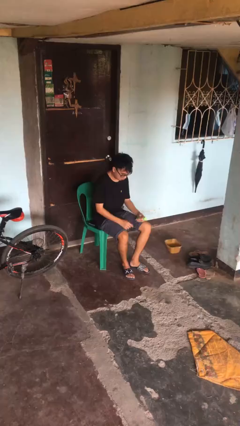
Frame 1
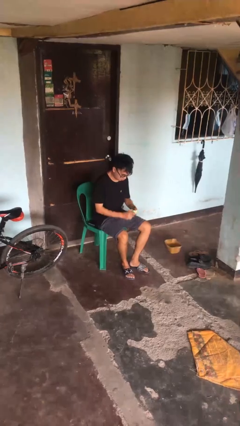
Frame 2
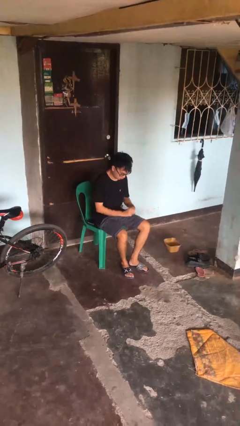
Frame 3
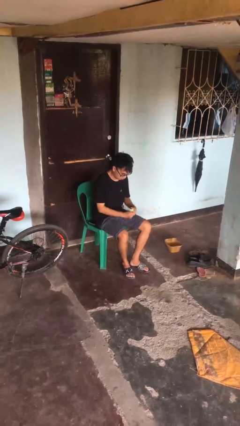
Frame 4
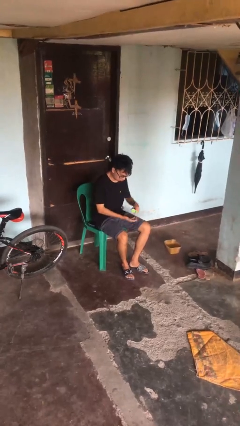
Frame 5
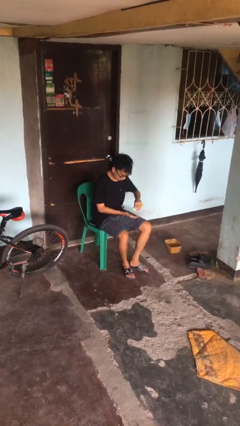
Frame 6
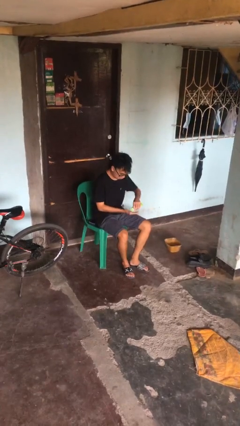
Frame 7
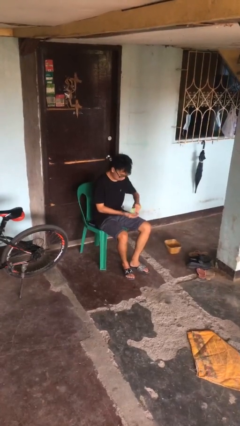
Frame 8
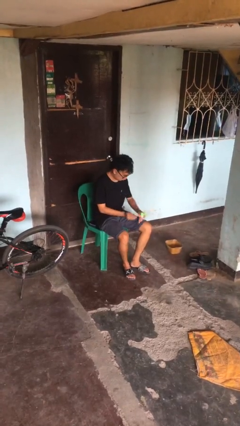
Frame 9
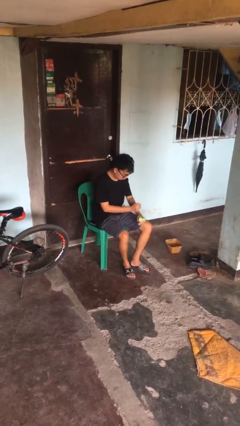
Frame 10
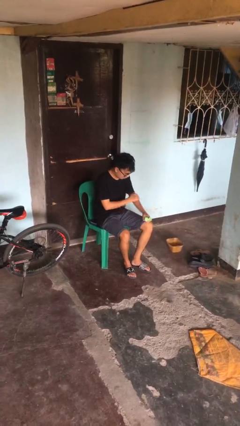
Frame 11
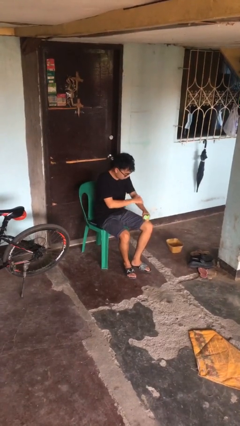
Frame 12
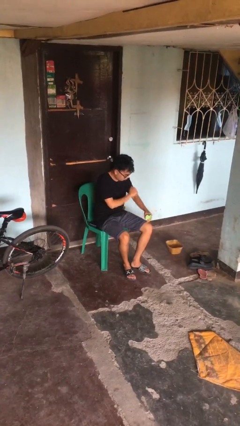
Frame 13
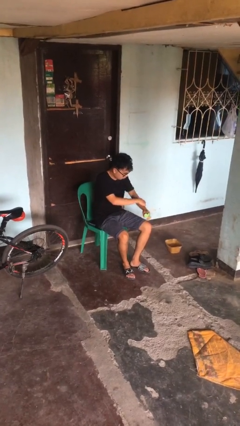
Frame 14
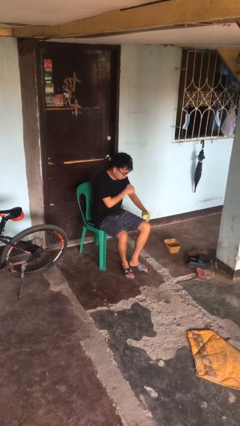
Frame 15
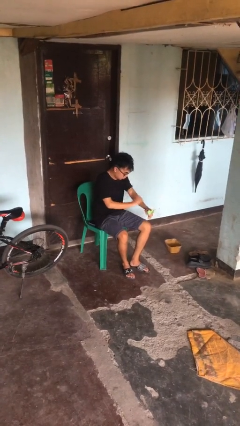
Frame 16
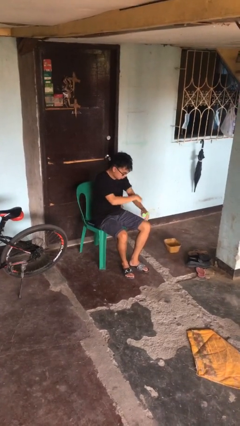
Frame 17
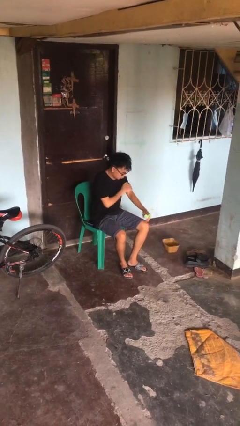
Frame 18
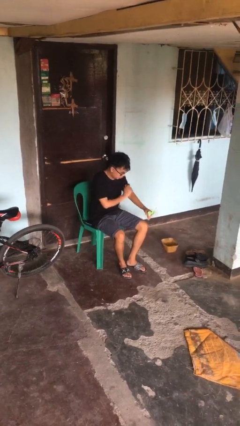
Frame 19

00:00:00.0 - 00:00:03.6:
person applies sunscreen

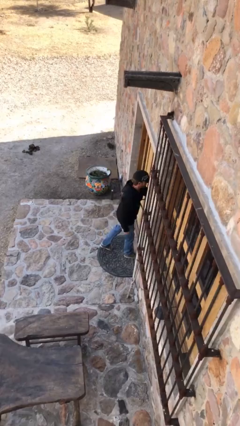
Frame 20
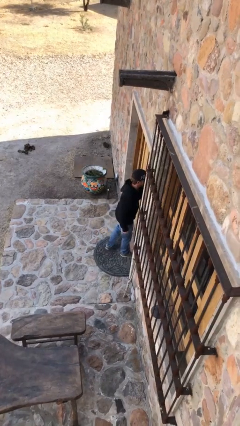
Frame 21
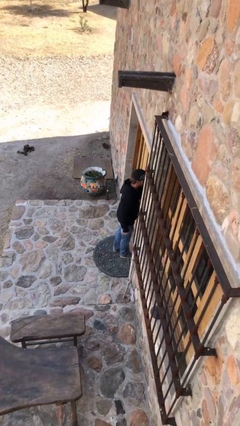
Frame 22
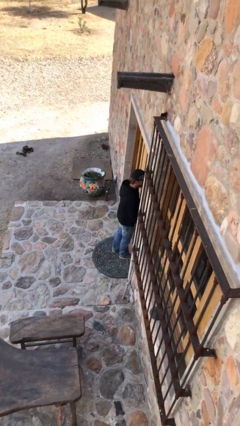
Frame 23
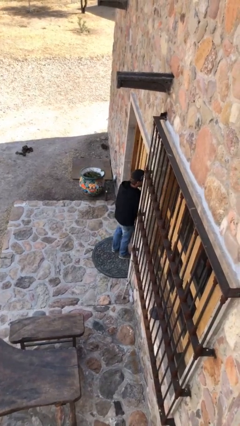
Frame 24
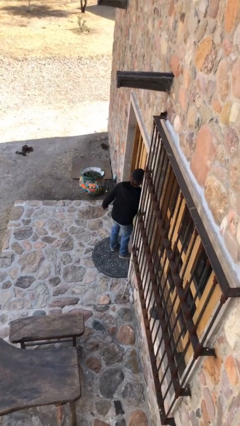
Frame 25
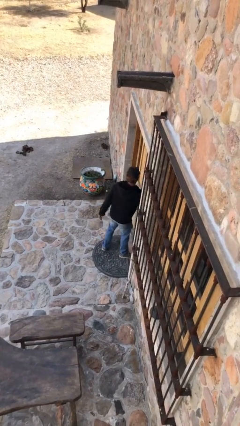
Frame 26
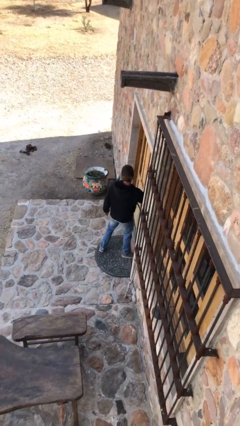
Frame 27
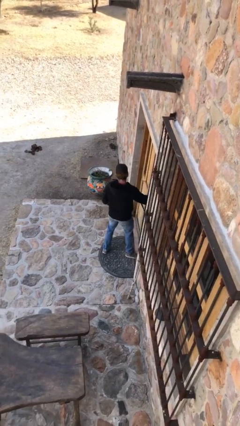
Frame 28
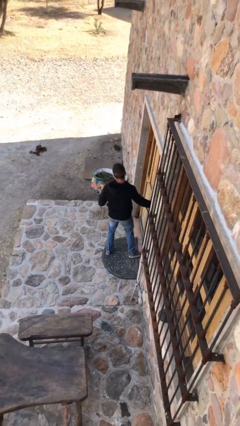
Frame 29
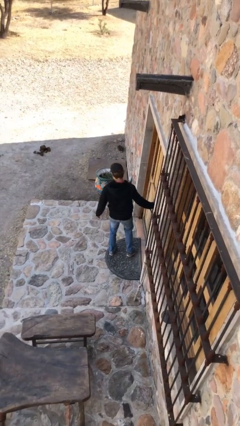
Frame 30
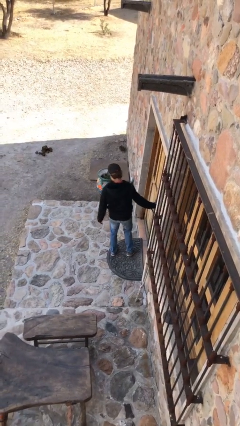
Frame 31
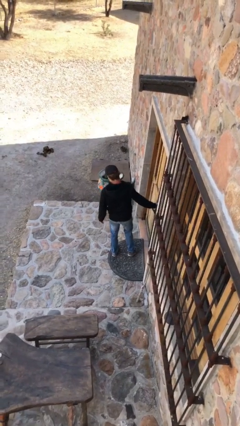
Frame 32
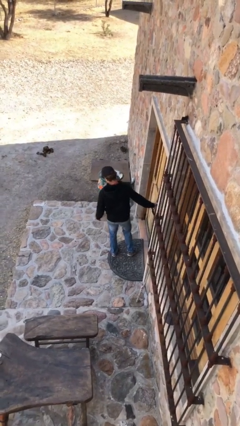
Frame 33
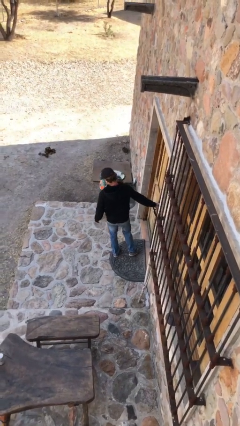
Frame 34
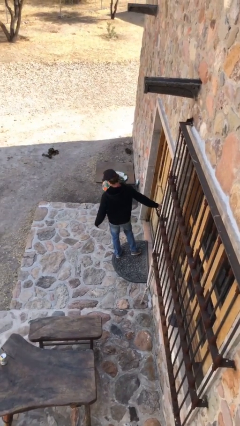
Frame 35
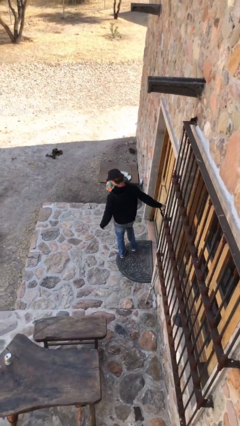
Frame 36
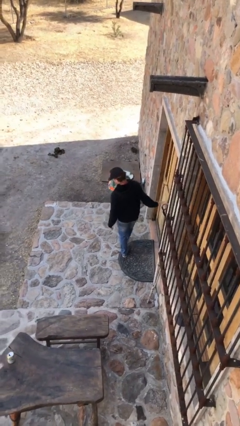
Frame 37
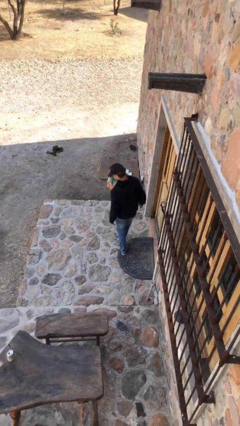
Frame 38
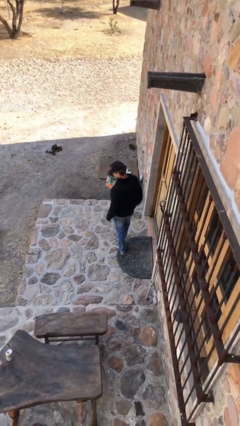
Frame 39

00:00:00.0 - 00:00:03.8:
person closes facility door

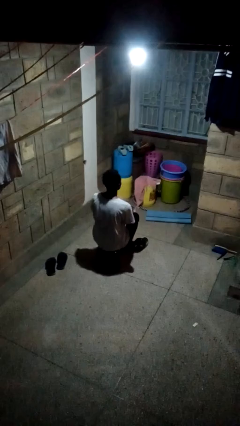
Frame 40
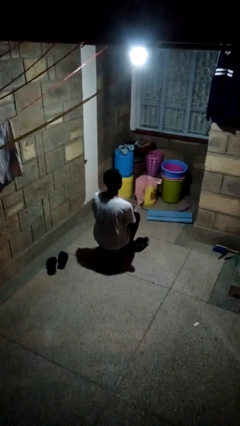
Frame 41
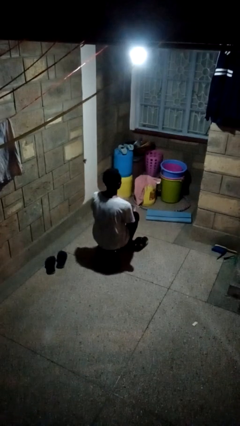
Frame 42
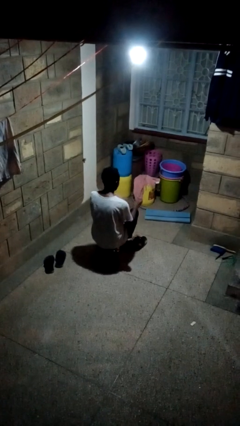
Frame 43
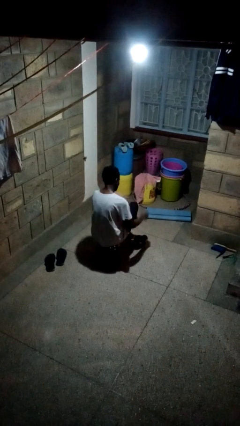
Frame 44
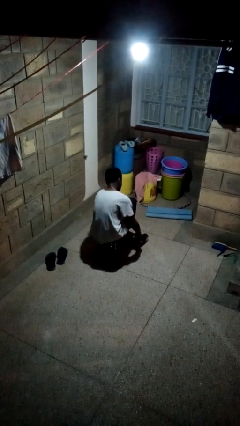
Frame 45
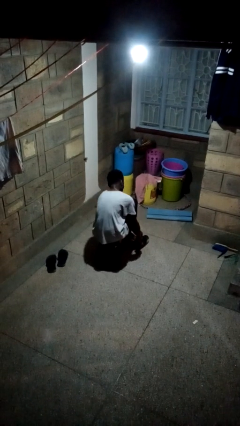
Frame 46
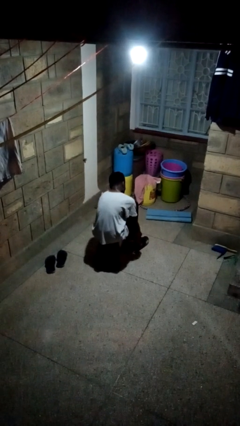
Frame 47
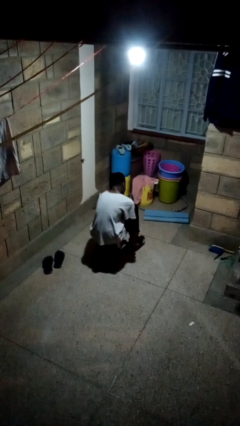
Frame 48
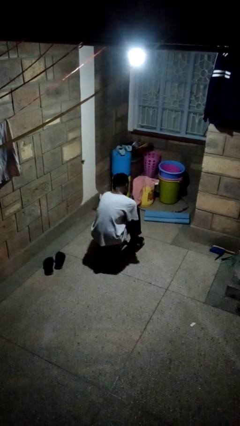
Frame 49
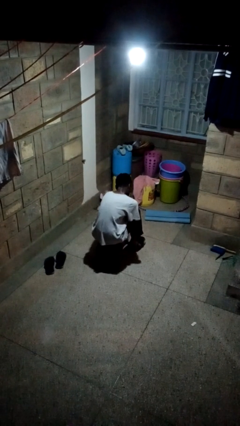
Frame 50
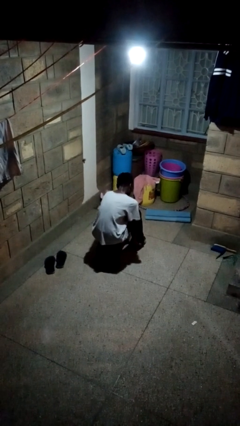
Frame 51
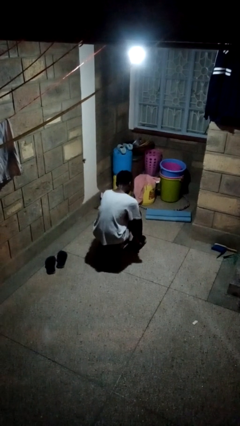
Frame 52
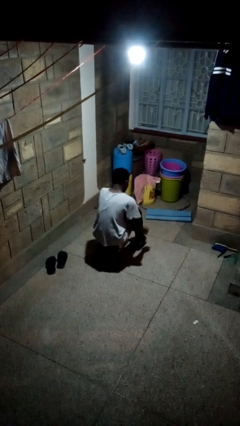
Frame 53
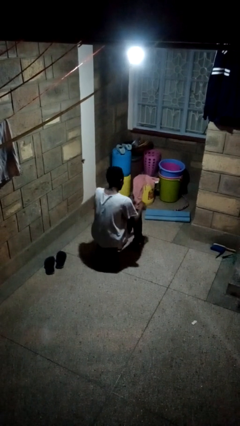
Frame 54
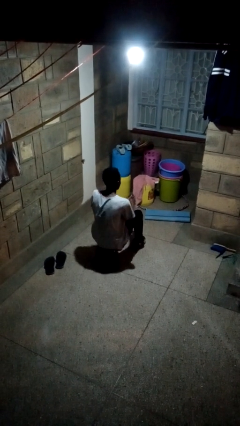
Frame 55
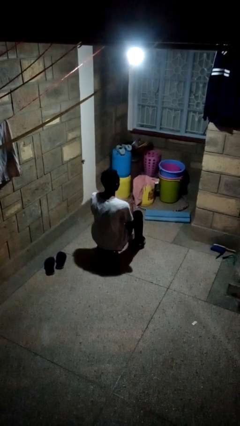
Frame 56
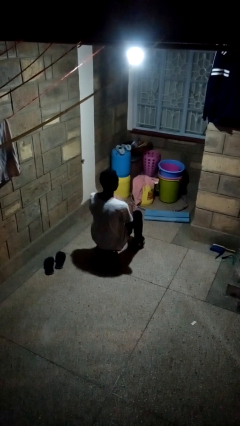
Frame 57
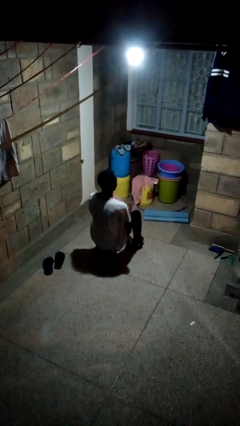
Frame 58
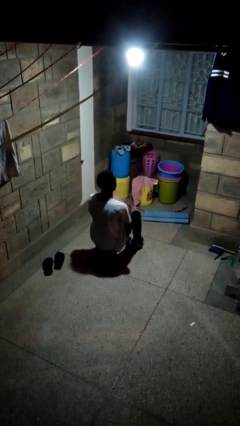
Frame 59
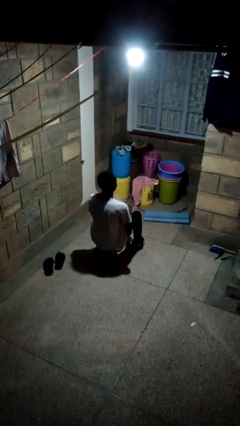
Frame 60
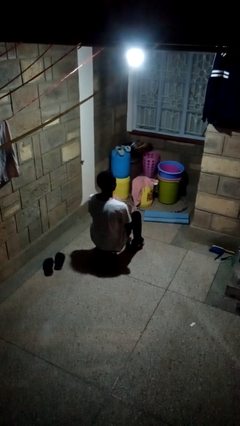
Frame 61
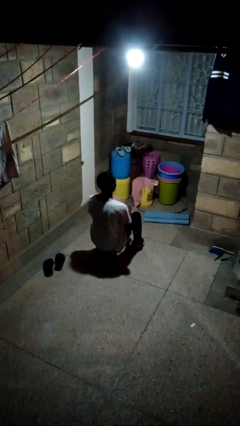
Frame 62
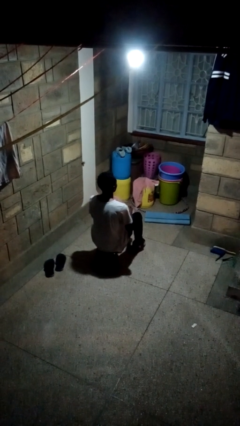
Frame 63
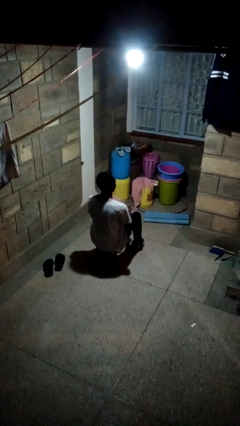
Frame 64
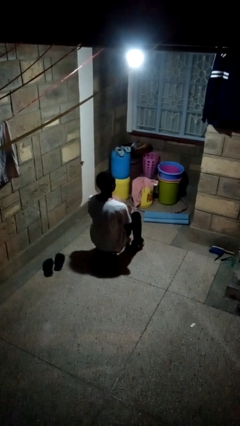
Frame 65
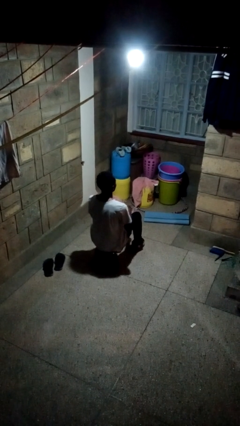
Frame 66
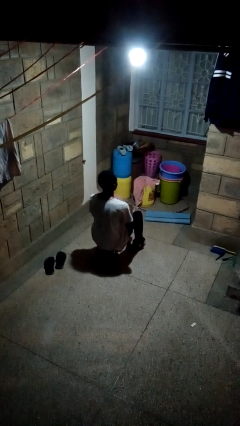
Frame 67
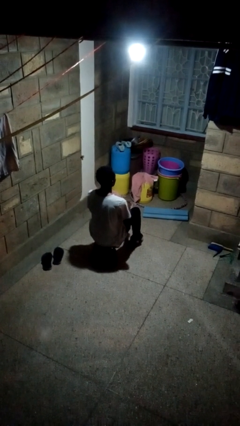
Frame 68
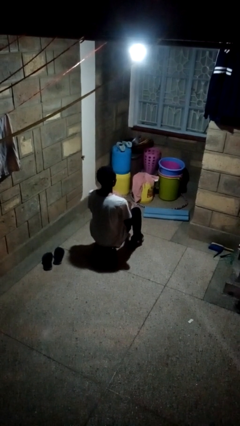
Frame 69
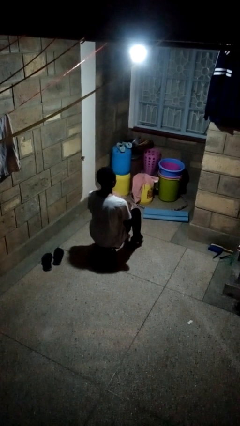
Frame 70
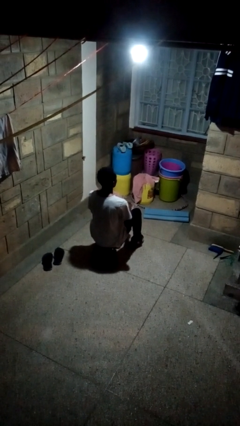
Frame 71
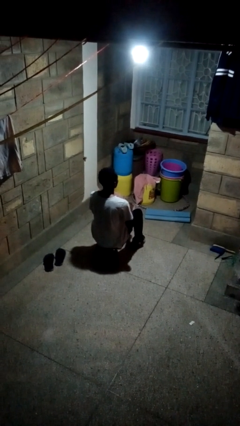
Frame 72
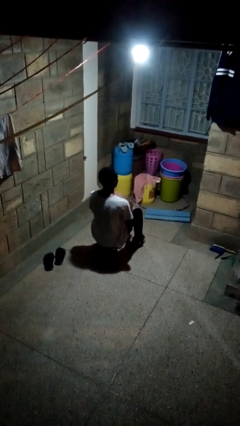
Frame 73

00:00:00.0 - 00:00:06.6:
person puts on shoes

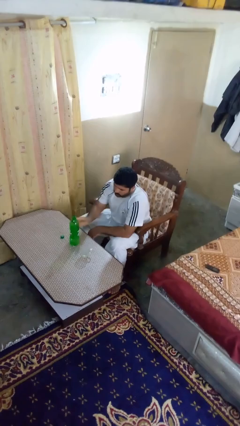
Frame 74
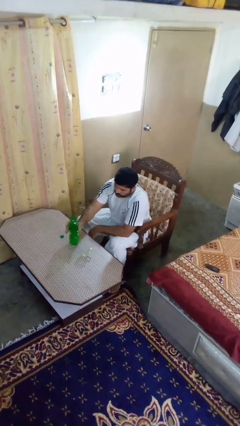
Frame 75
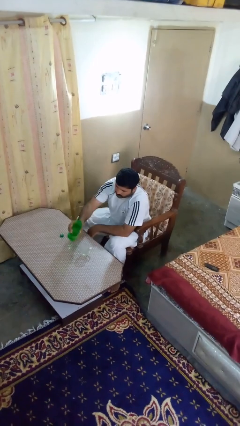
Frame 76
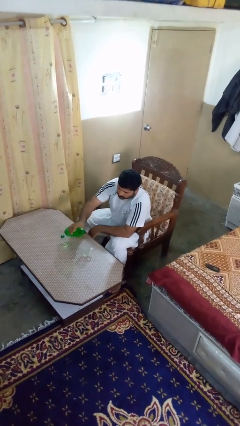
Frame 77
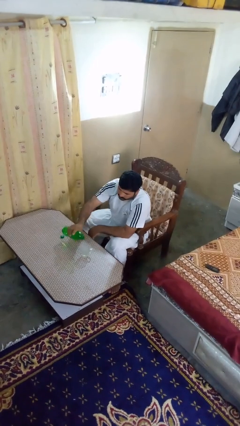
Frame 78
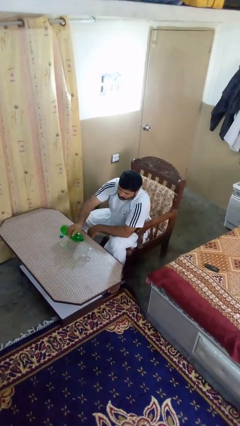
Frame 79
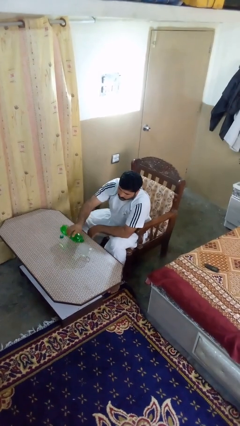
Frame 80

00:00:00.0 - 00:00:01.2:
person pours liquid into cup

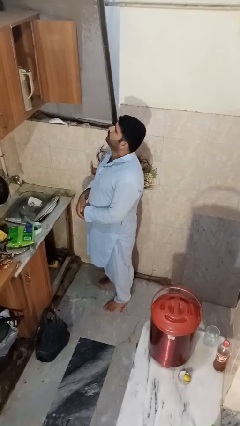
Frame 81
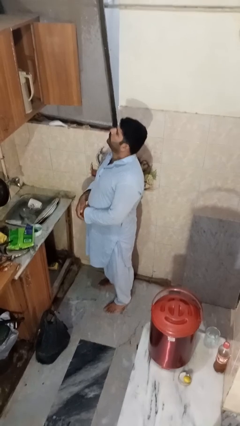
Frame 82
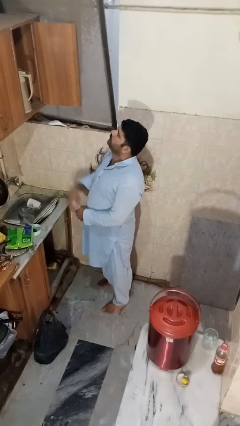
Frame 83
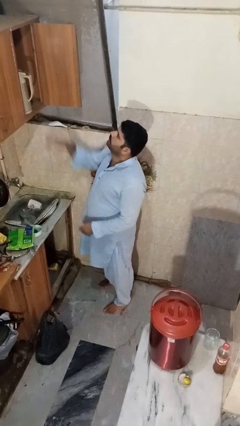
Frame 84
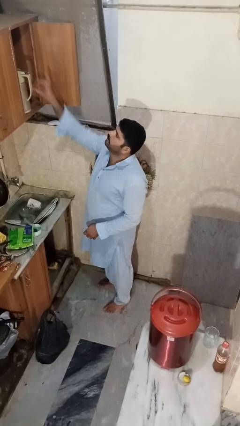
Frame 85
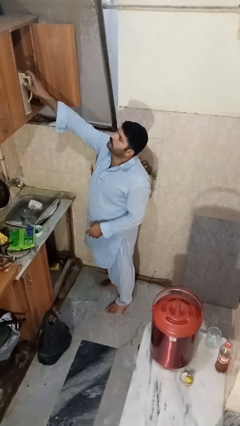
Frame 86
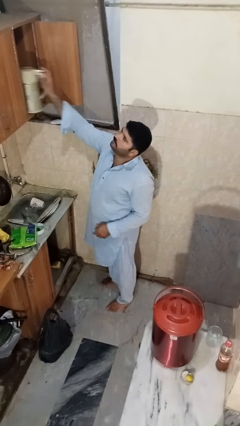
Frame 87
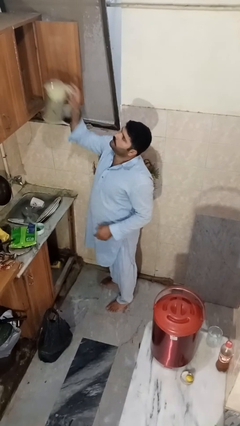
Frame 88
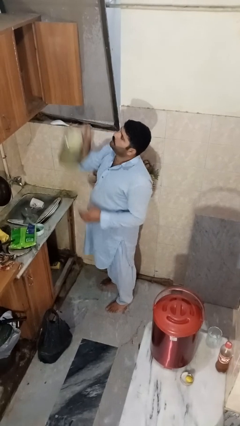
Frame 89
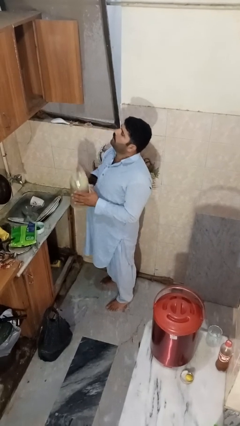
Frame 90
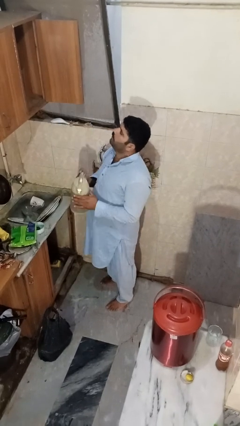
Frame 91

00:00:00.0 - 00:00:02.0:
person takes object from cabinet
